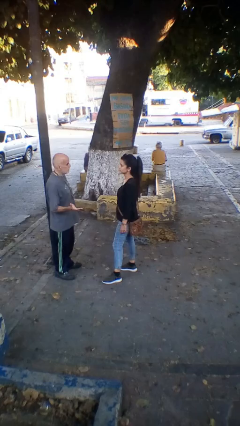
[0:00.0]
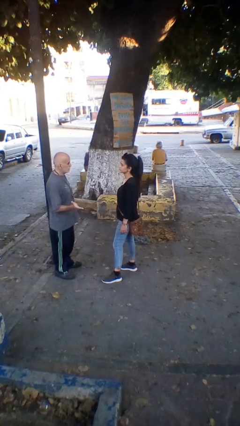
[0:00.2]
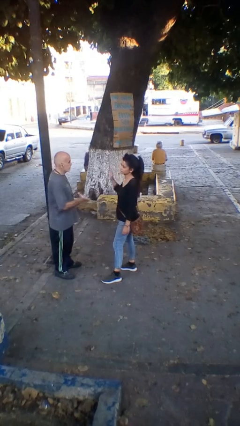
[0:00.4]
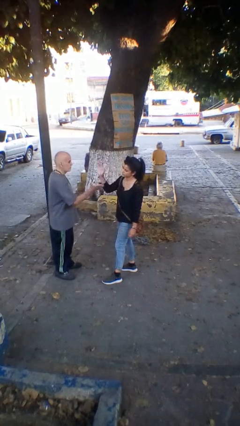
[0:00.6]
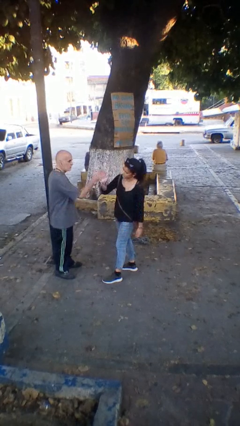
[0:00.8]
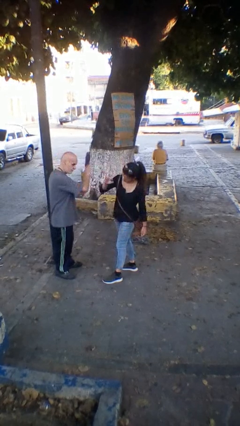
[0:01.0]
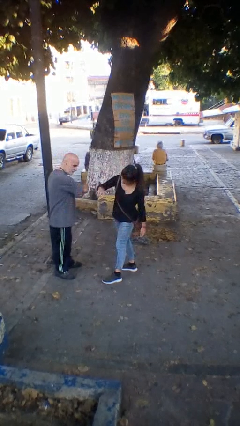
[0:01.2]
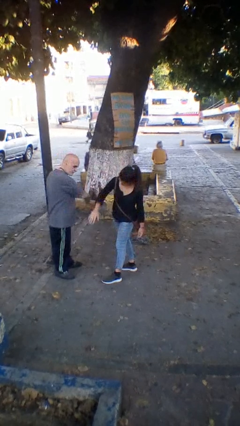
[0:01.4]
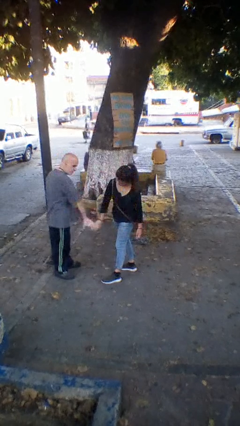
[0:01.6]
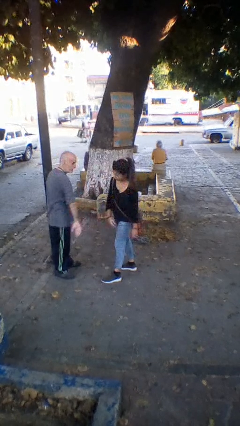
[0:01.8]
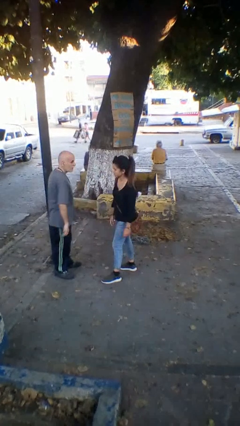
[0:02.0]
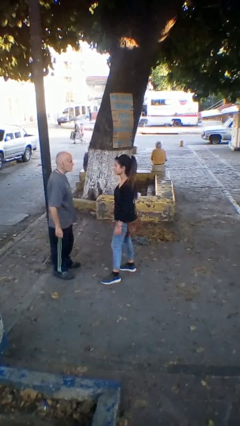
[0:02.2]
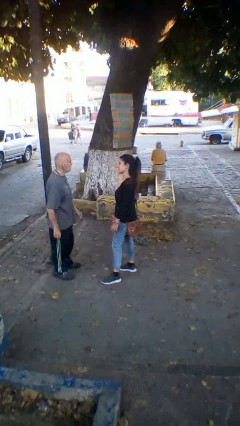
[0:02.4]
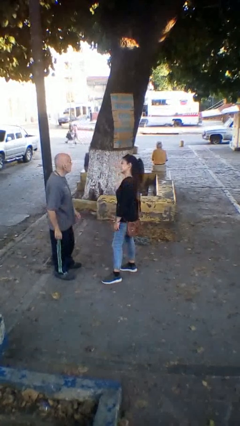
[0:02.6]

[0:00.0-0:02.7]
person highfives hand

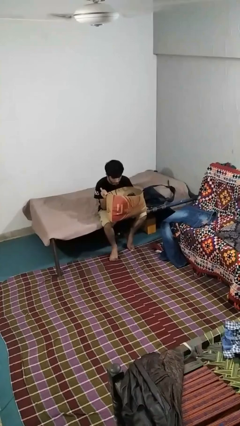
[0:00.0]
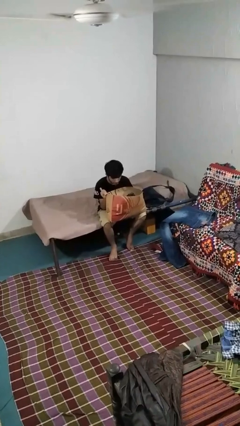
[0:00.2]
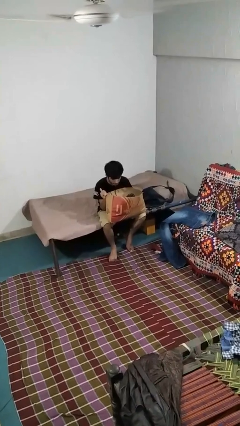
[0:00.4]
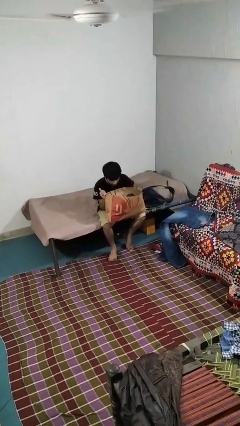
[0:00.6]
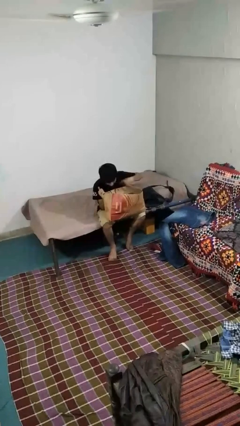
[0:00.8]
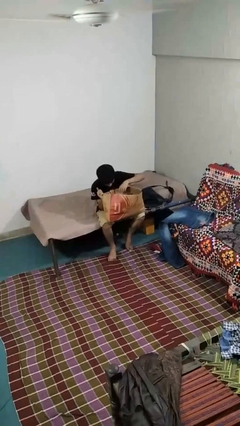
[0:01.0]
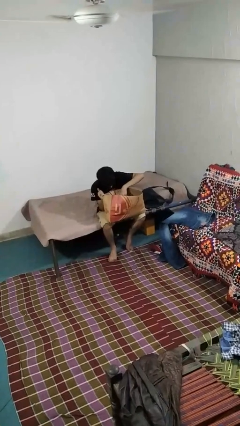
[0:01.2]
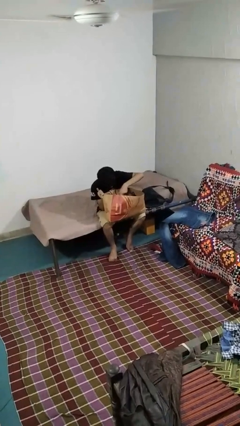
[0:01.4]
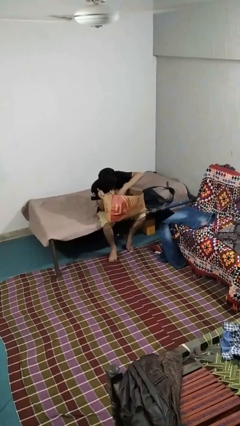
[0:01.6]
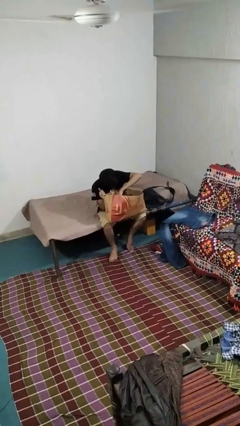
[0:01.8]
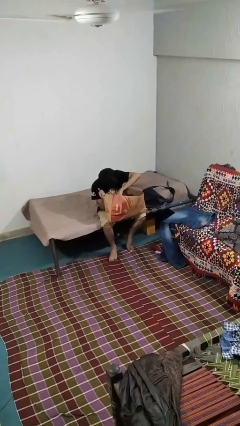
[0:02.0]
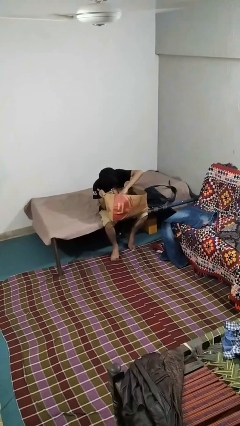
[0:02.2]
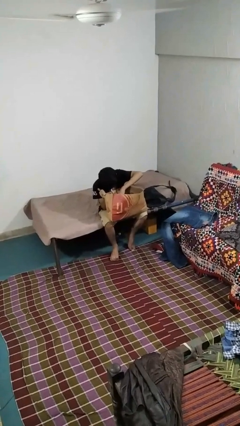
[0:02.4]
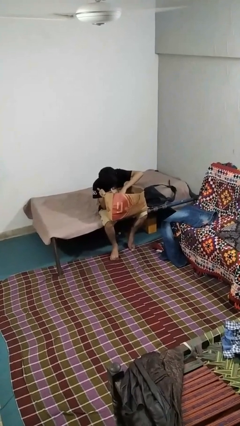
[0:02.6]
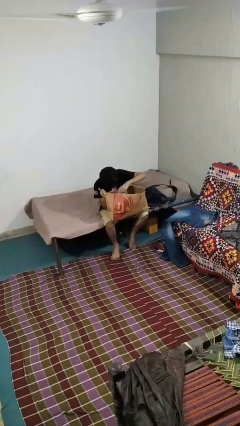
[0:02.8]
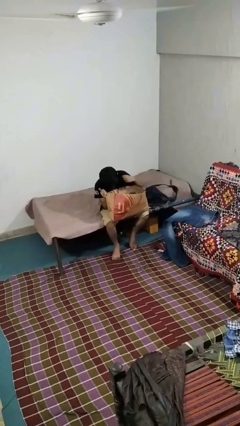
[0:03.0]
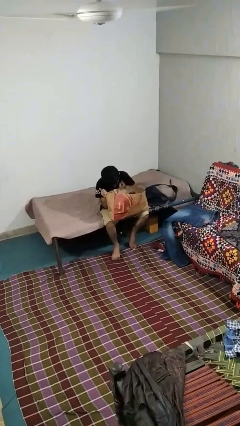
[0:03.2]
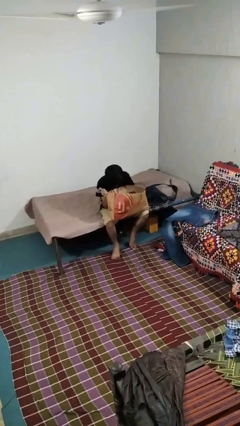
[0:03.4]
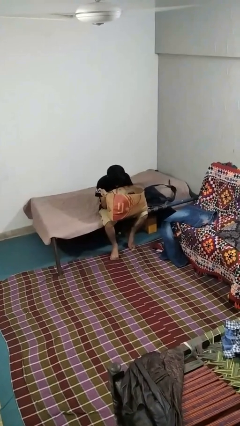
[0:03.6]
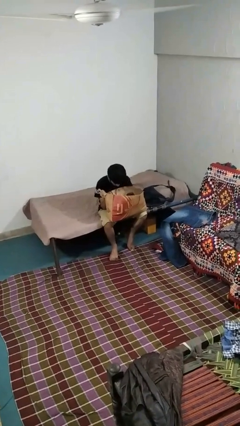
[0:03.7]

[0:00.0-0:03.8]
person searches in bag

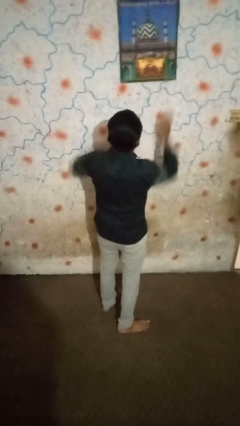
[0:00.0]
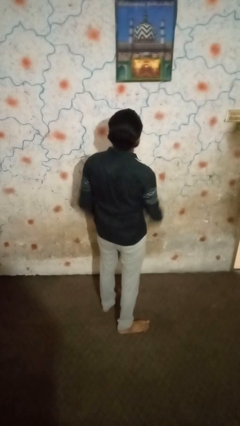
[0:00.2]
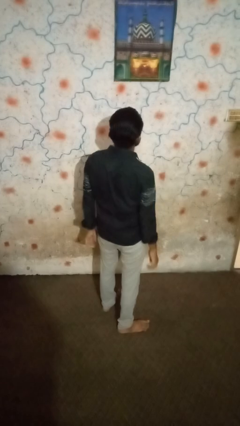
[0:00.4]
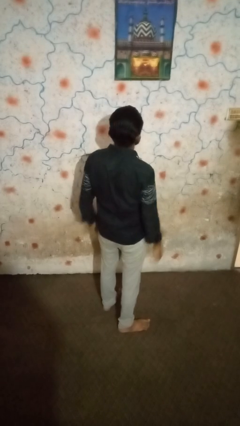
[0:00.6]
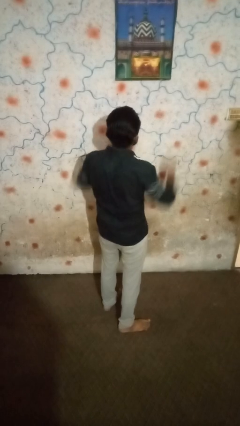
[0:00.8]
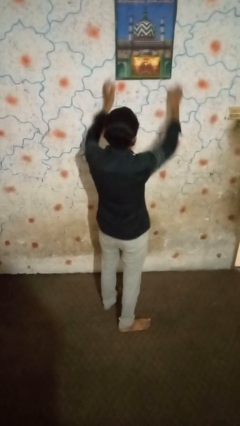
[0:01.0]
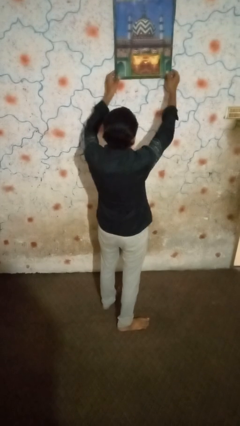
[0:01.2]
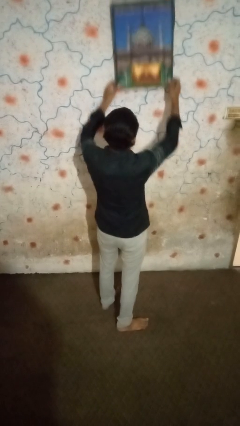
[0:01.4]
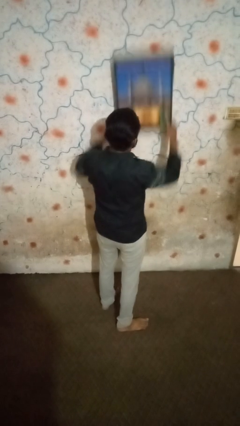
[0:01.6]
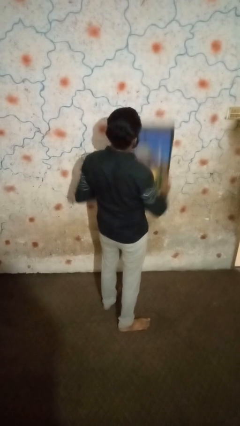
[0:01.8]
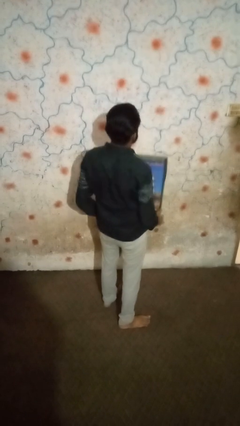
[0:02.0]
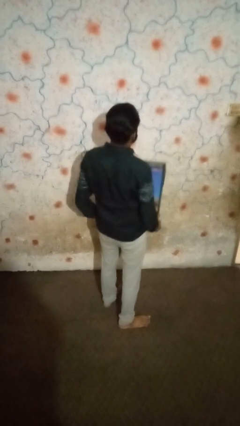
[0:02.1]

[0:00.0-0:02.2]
person takes down picture frame

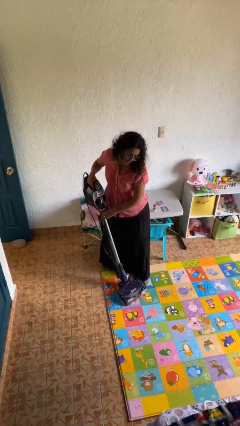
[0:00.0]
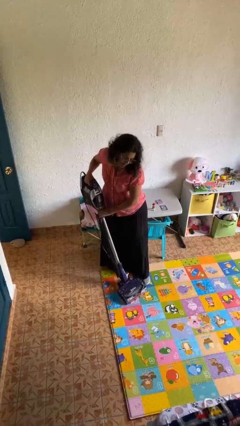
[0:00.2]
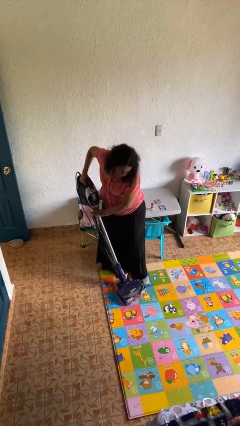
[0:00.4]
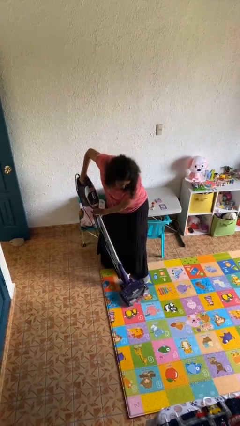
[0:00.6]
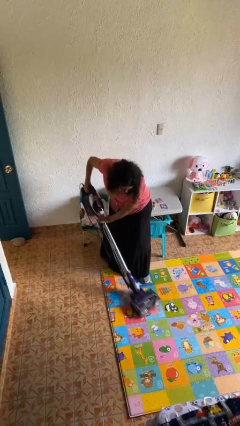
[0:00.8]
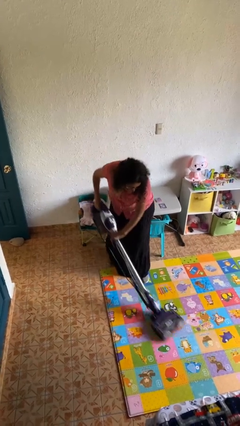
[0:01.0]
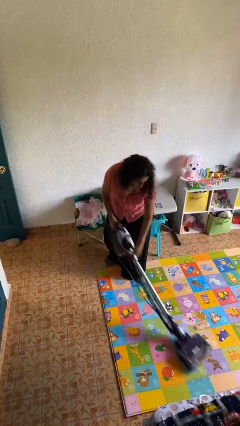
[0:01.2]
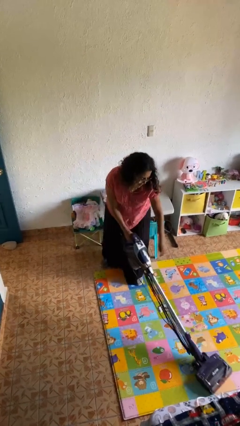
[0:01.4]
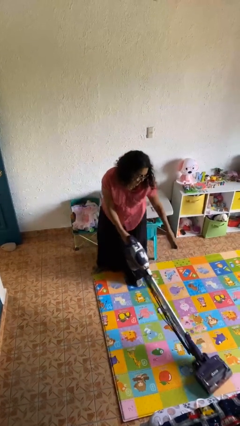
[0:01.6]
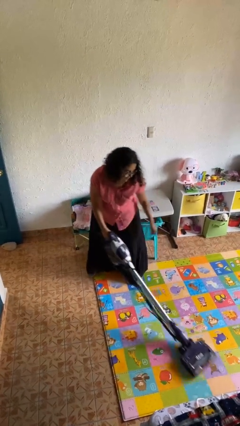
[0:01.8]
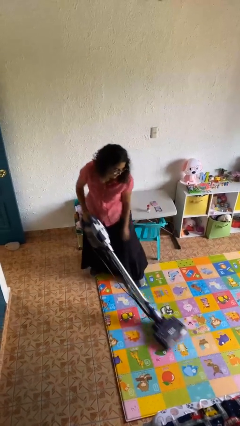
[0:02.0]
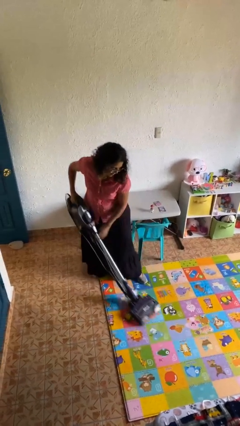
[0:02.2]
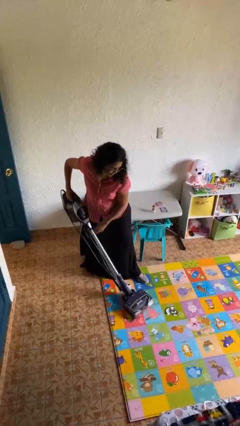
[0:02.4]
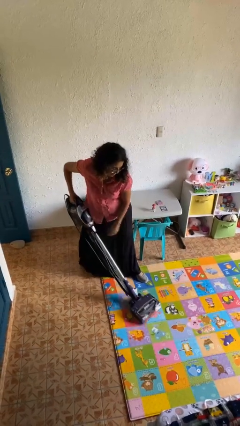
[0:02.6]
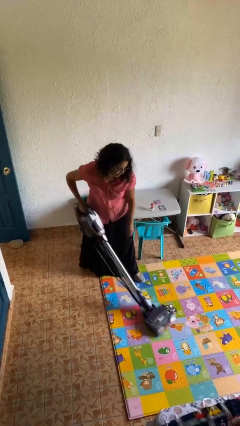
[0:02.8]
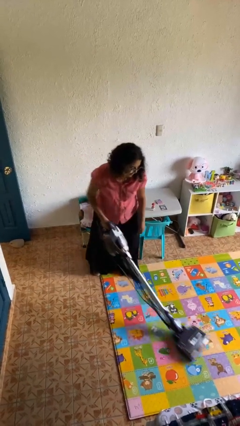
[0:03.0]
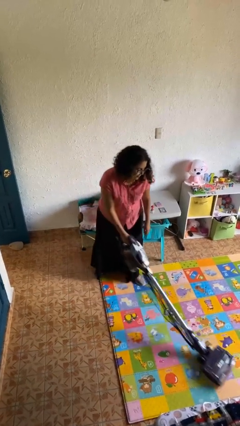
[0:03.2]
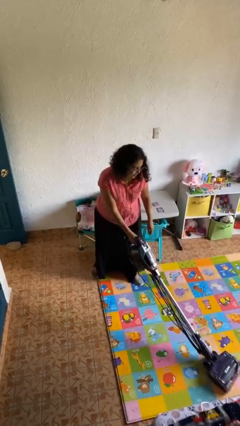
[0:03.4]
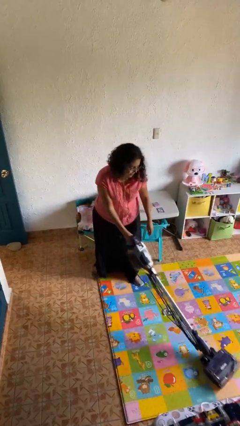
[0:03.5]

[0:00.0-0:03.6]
person vacuums carpet

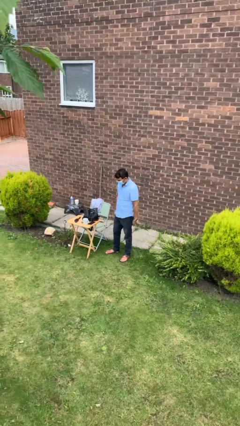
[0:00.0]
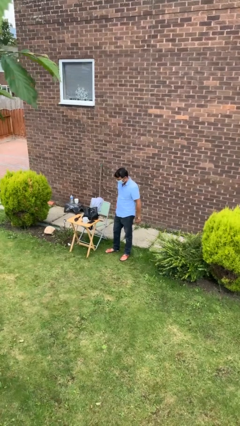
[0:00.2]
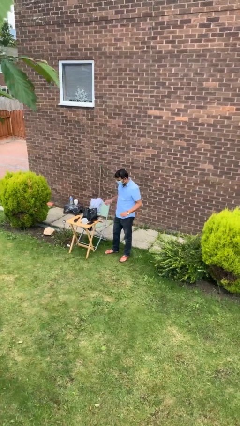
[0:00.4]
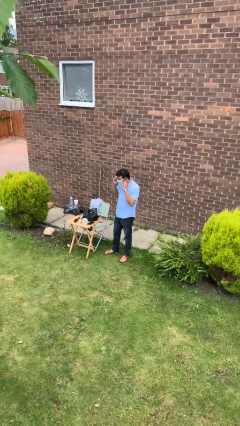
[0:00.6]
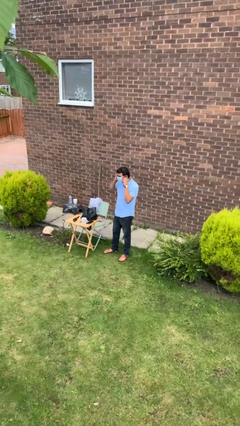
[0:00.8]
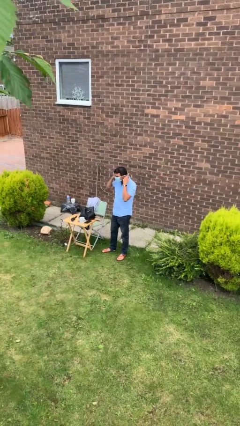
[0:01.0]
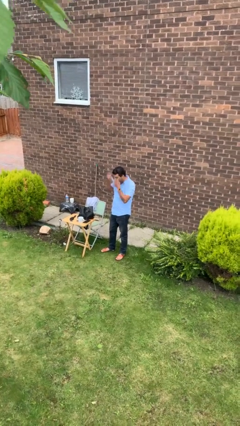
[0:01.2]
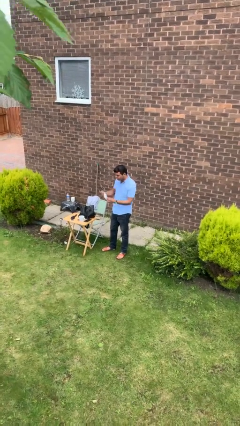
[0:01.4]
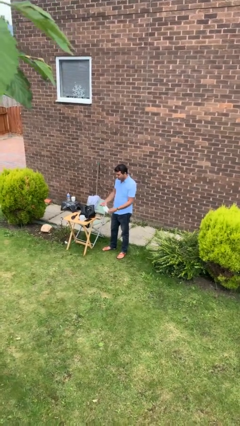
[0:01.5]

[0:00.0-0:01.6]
person takes off facemask

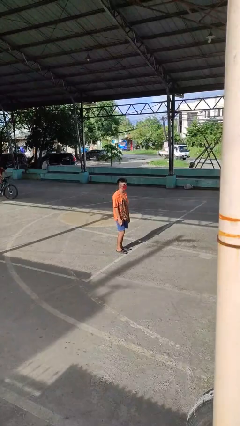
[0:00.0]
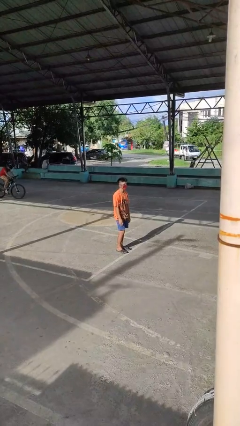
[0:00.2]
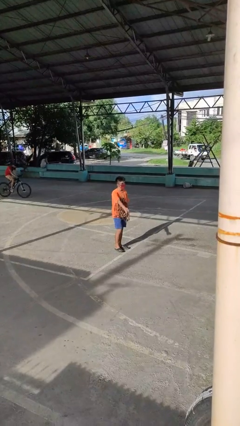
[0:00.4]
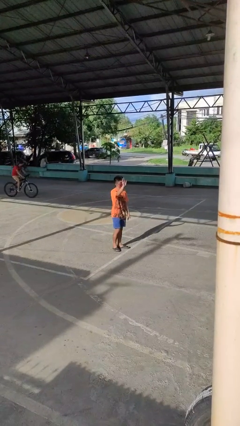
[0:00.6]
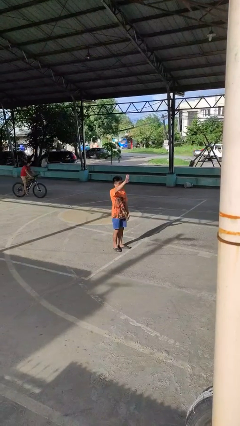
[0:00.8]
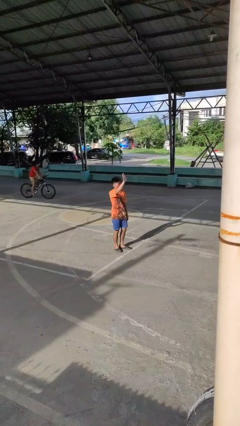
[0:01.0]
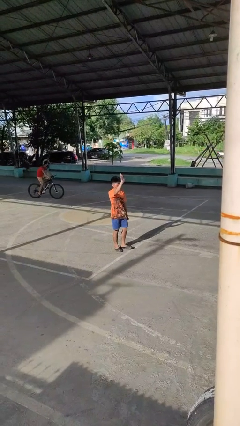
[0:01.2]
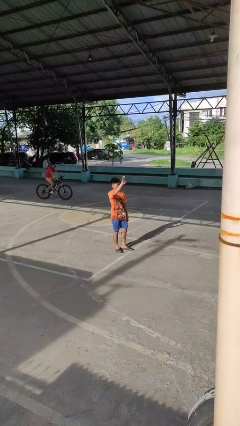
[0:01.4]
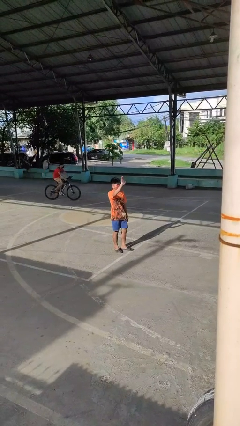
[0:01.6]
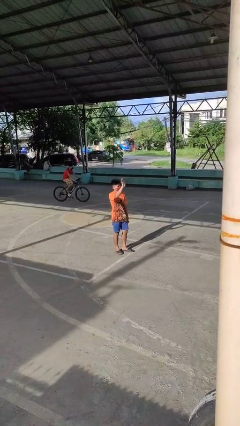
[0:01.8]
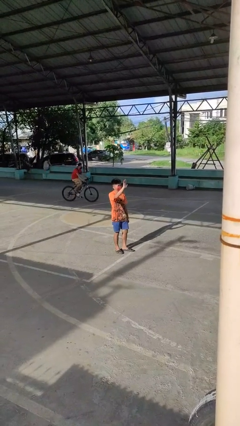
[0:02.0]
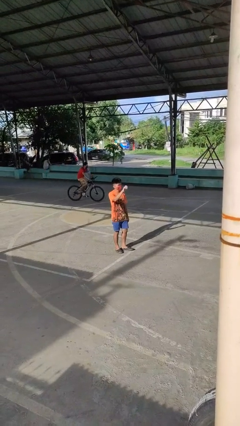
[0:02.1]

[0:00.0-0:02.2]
person waves at person

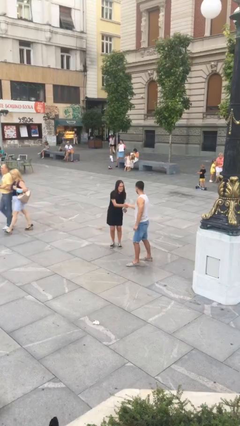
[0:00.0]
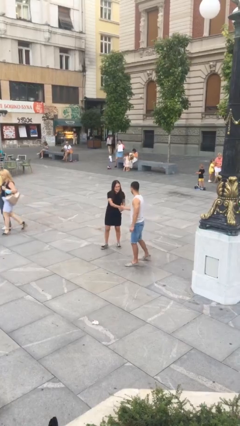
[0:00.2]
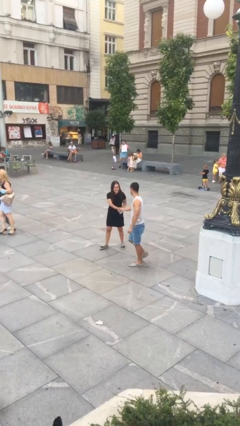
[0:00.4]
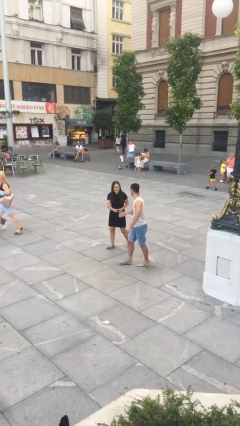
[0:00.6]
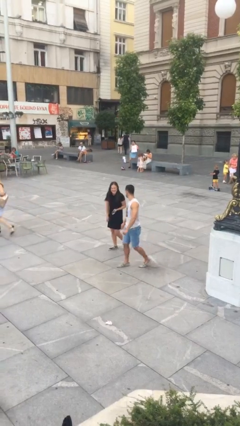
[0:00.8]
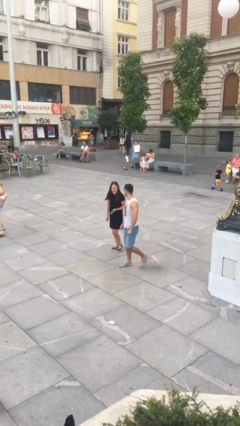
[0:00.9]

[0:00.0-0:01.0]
person shakes hand
